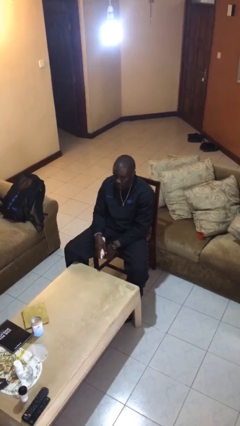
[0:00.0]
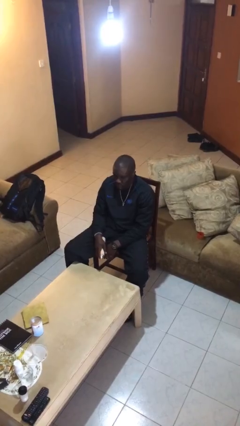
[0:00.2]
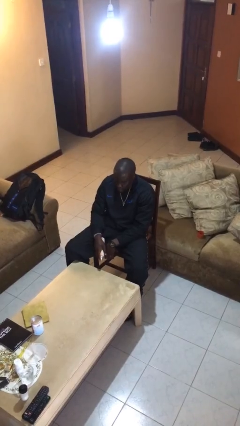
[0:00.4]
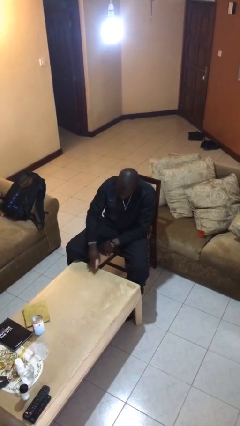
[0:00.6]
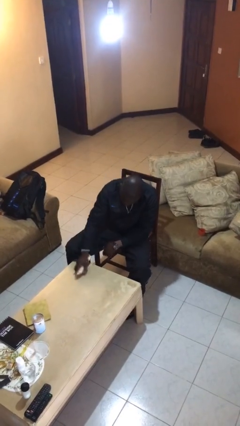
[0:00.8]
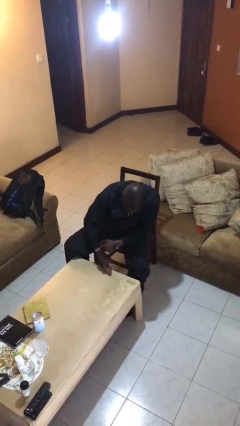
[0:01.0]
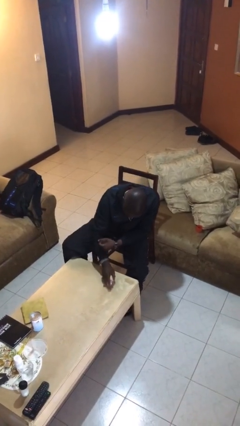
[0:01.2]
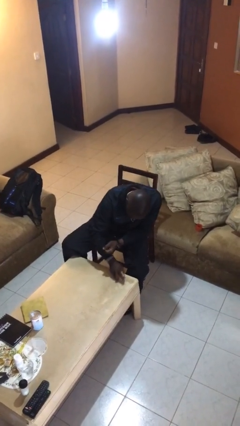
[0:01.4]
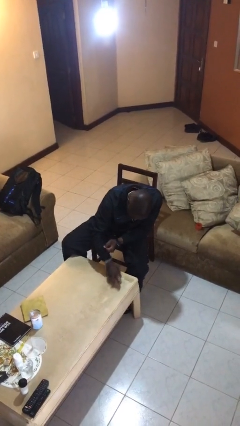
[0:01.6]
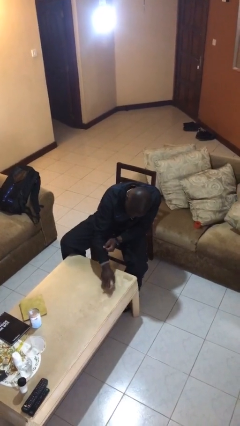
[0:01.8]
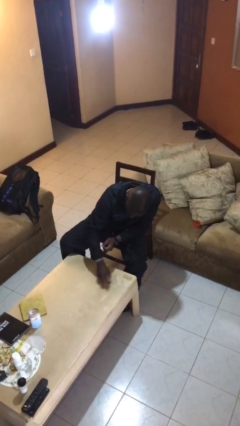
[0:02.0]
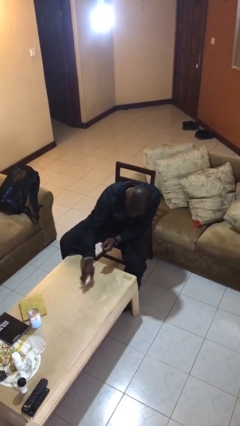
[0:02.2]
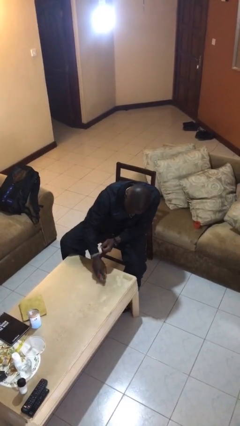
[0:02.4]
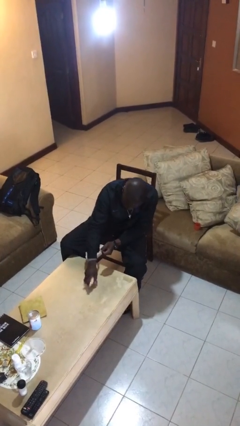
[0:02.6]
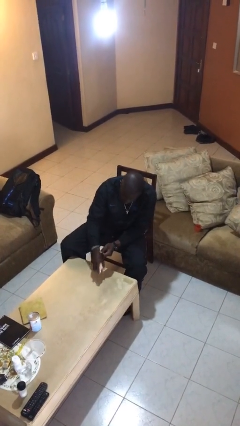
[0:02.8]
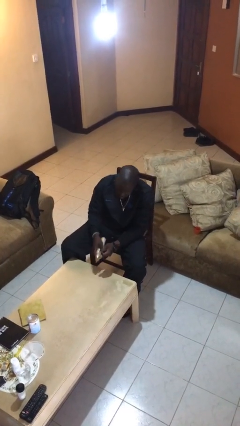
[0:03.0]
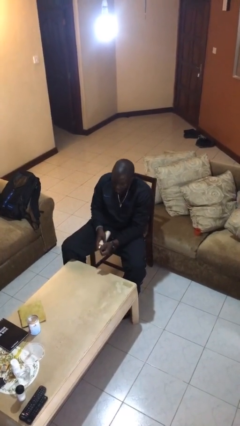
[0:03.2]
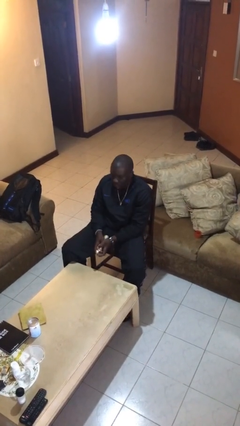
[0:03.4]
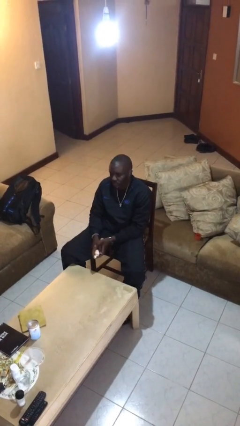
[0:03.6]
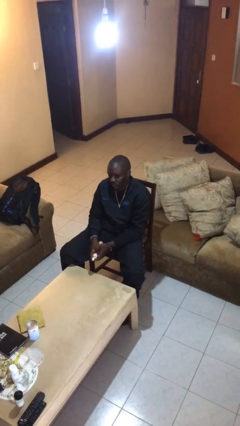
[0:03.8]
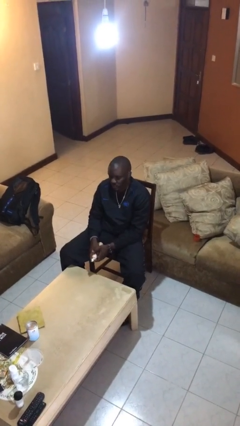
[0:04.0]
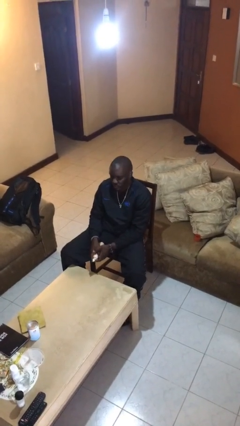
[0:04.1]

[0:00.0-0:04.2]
person sprays from bottle

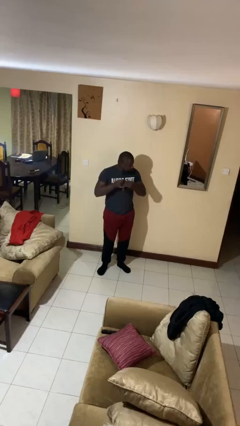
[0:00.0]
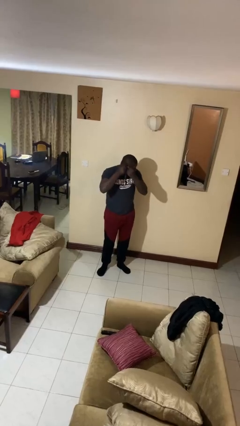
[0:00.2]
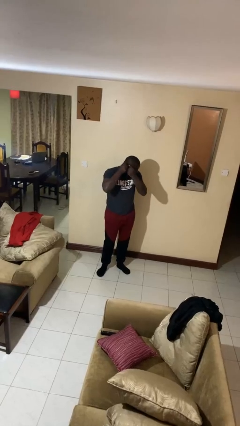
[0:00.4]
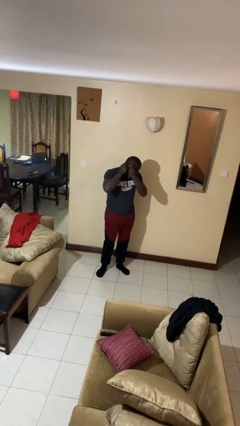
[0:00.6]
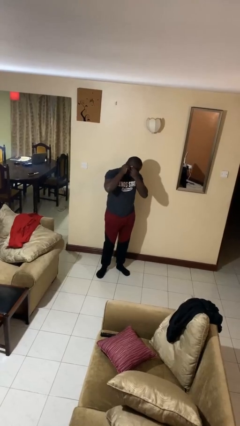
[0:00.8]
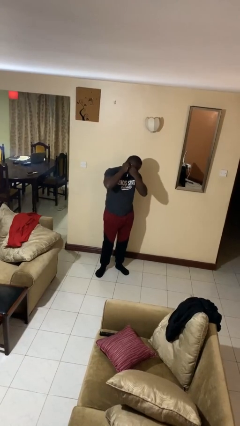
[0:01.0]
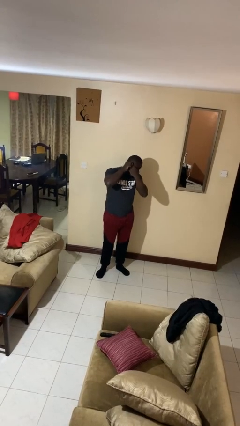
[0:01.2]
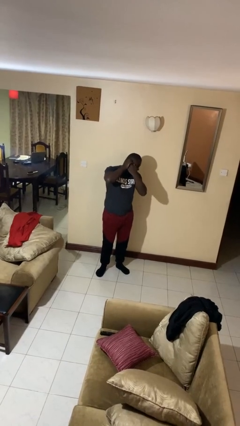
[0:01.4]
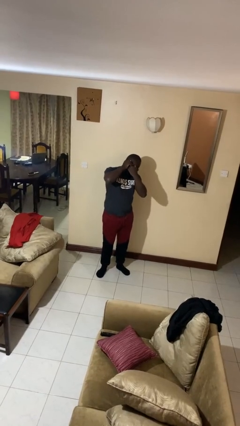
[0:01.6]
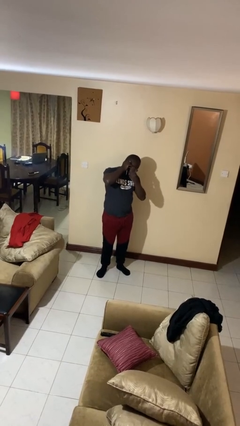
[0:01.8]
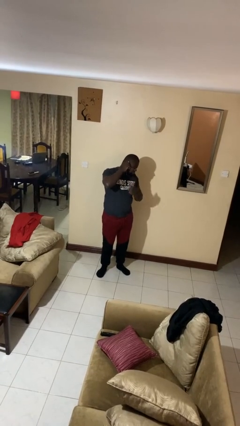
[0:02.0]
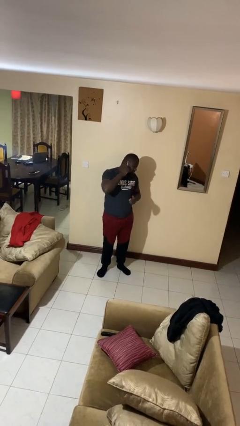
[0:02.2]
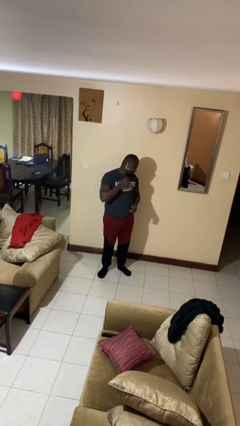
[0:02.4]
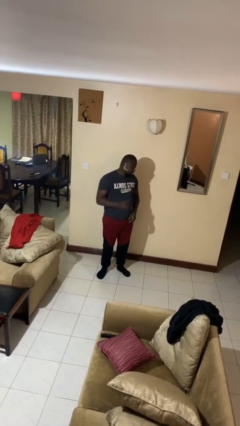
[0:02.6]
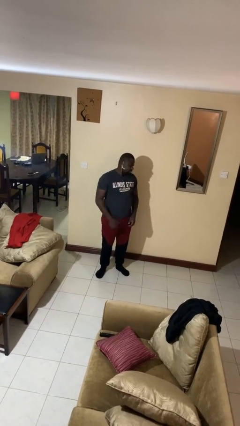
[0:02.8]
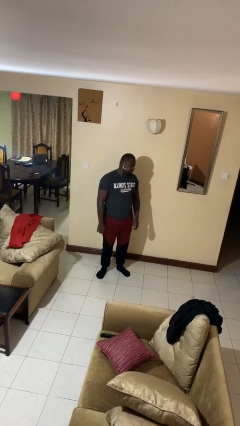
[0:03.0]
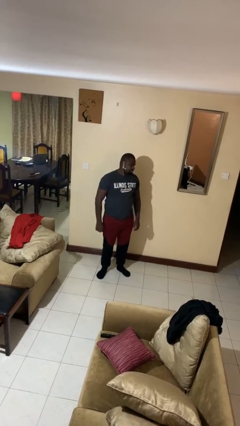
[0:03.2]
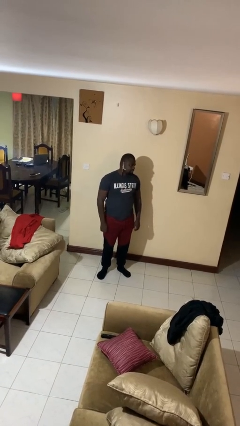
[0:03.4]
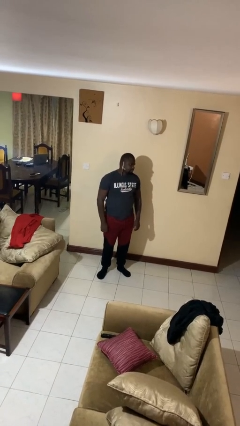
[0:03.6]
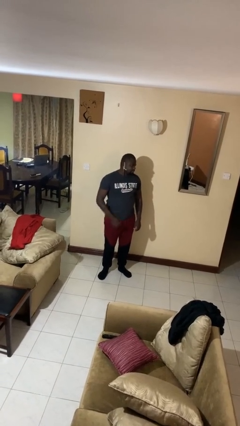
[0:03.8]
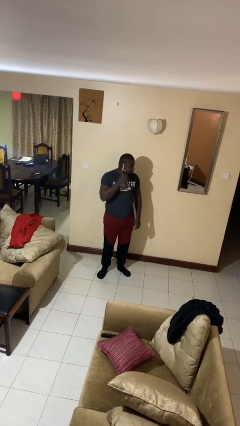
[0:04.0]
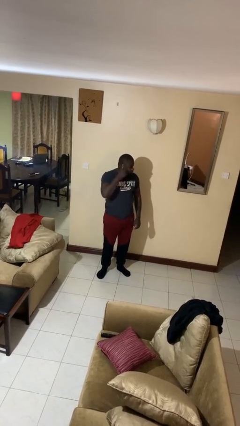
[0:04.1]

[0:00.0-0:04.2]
person puts on earrings

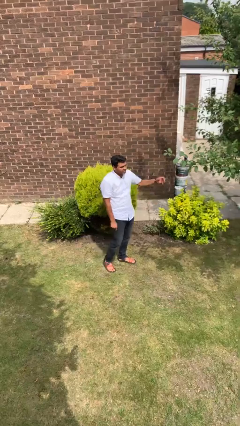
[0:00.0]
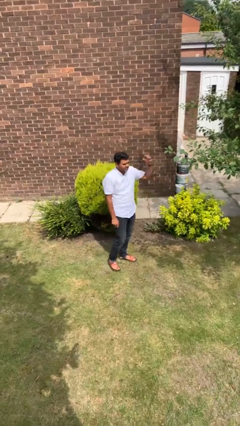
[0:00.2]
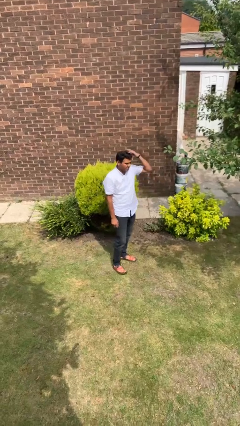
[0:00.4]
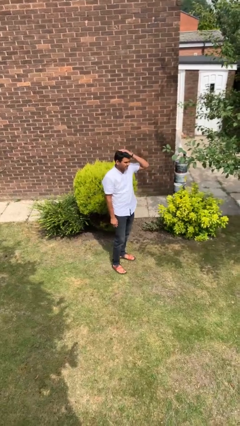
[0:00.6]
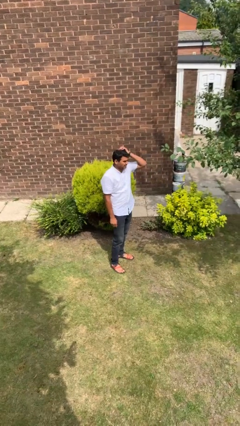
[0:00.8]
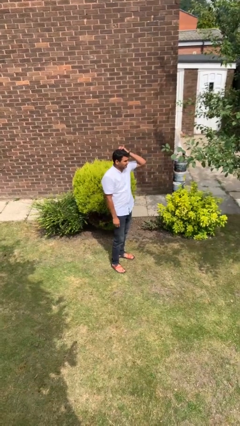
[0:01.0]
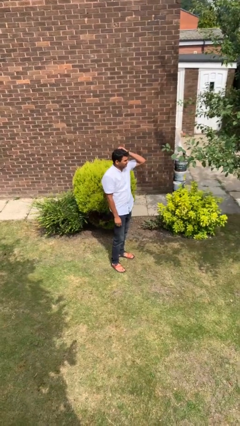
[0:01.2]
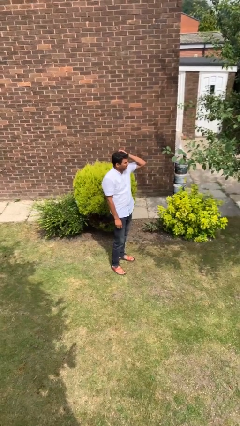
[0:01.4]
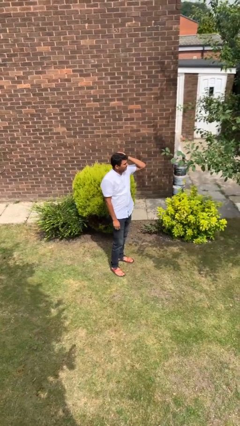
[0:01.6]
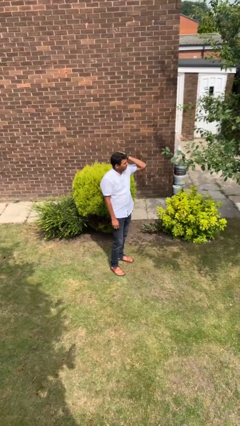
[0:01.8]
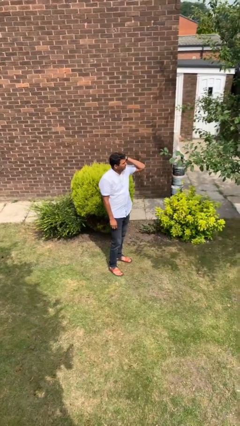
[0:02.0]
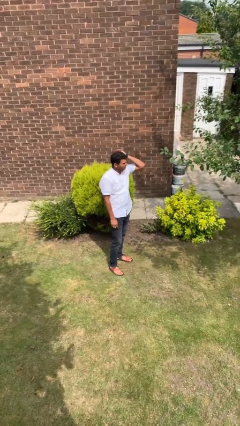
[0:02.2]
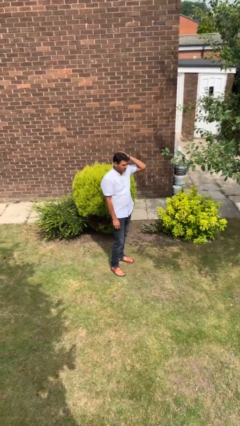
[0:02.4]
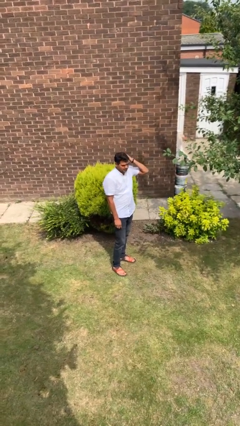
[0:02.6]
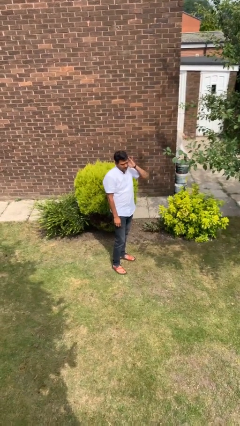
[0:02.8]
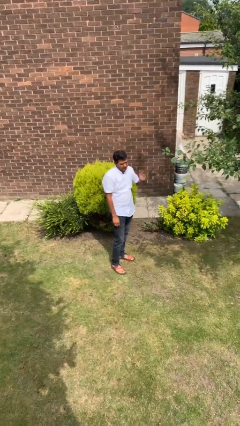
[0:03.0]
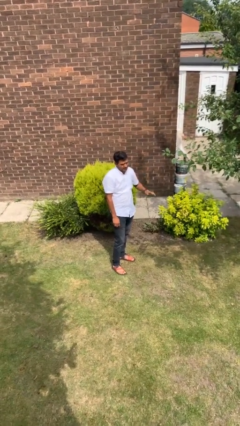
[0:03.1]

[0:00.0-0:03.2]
person scratches face

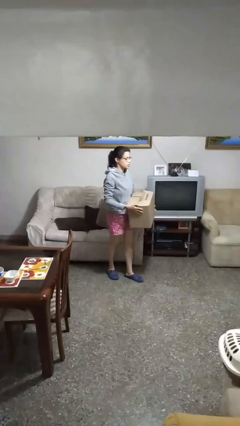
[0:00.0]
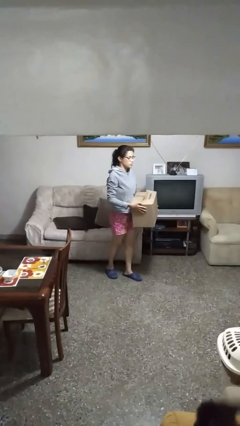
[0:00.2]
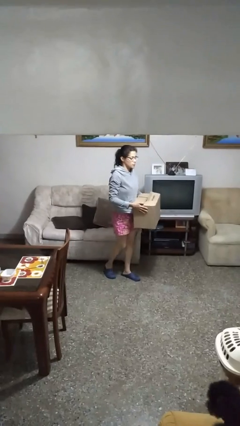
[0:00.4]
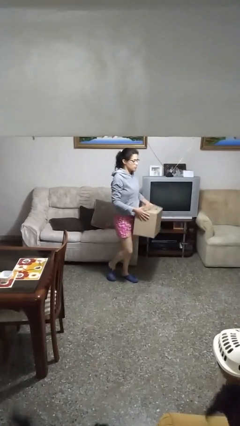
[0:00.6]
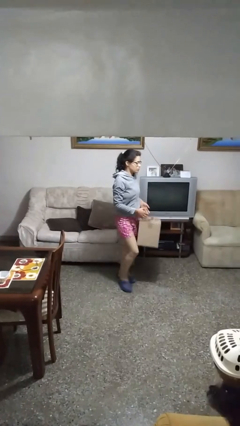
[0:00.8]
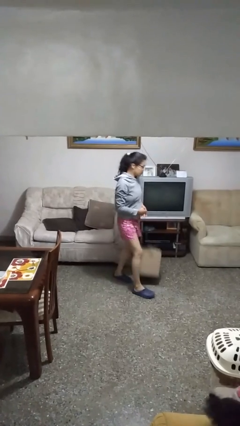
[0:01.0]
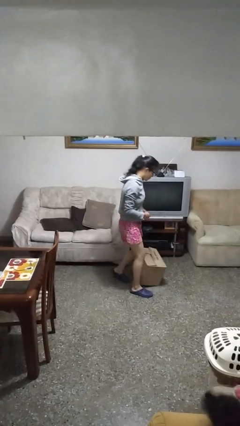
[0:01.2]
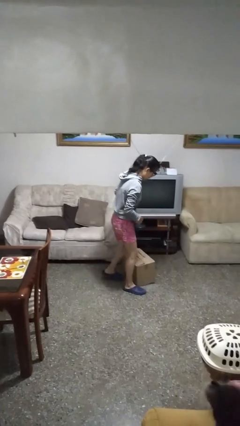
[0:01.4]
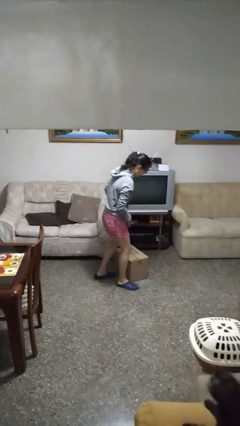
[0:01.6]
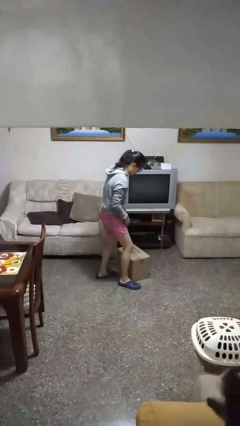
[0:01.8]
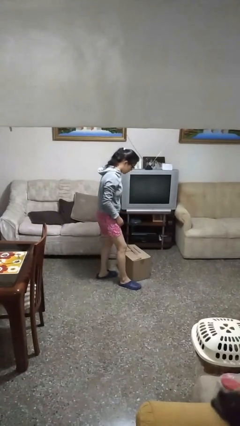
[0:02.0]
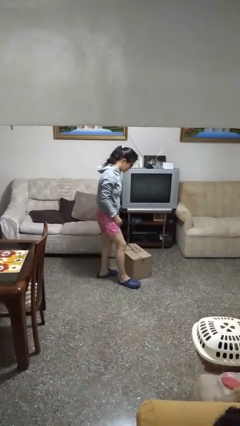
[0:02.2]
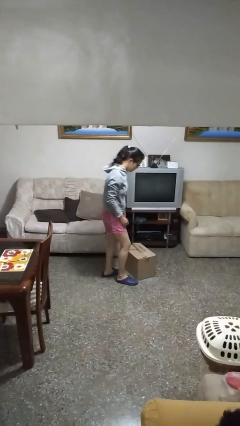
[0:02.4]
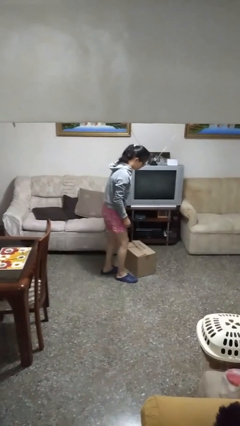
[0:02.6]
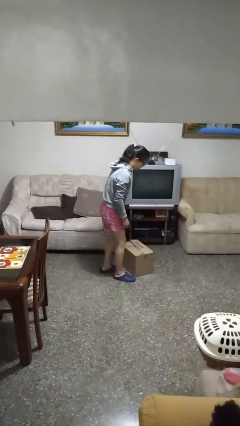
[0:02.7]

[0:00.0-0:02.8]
person drops object

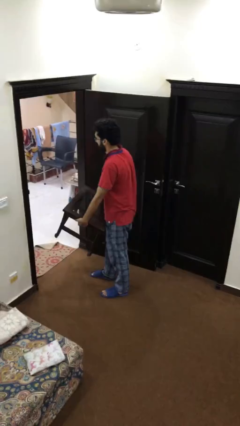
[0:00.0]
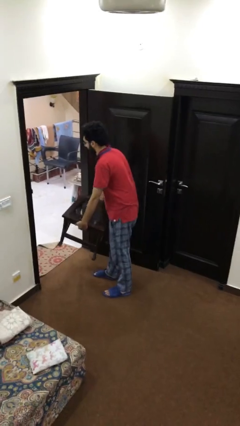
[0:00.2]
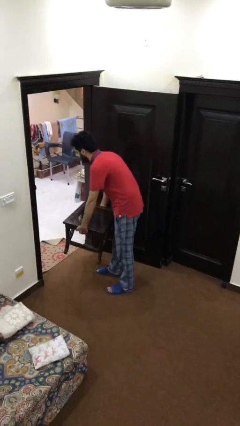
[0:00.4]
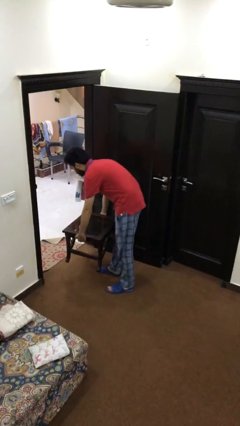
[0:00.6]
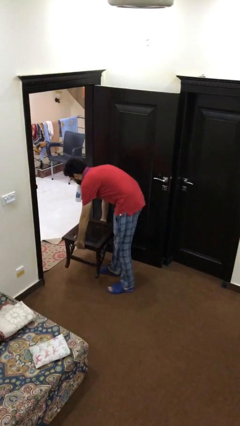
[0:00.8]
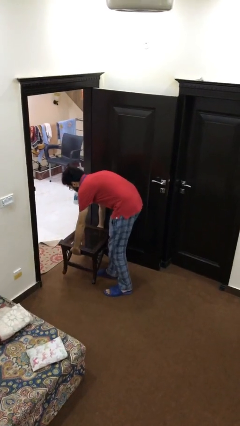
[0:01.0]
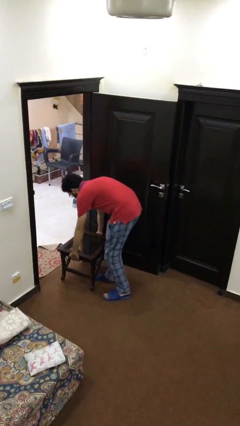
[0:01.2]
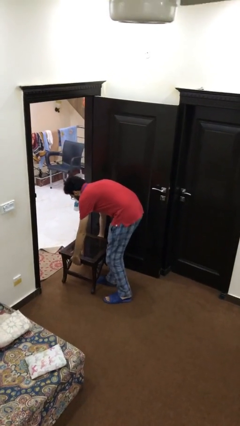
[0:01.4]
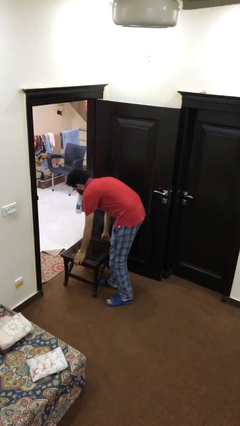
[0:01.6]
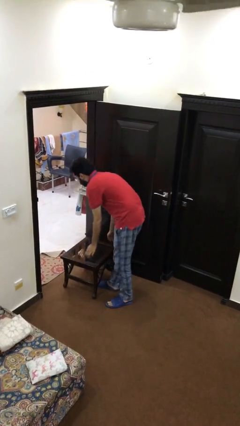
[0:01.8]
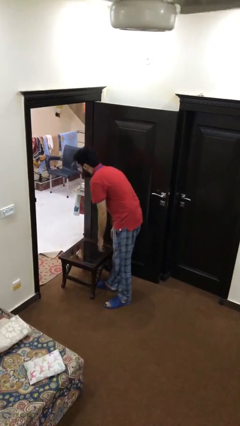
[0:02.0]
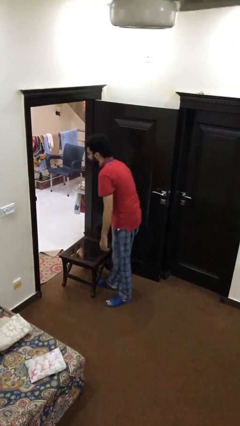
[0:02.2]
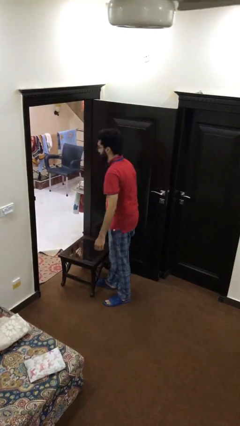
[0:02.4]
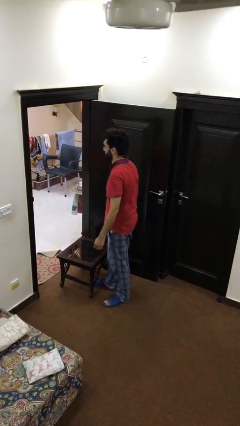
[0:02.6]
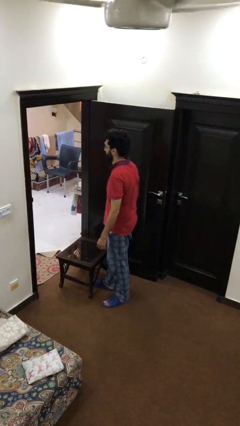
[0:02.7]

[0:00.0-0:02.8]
person puts down object on floor

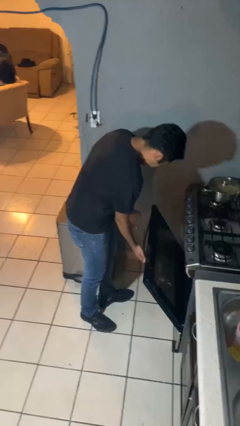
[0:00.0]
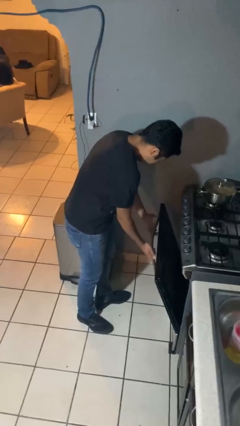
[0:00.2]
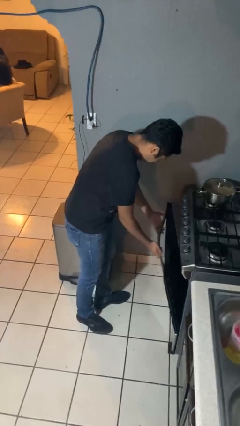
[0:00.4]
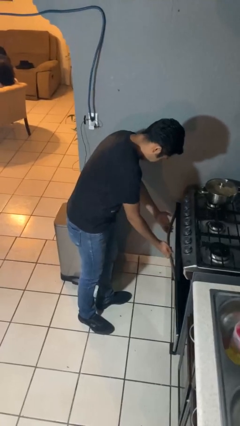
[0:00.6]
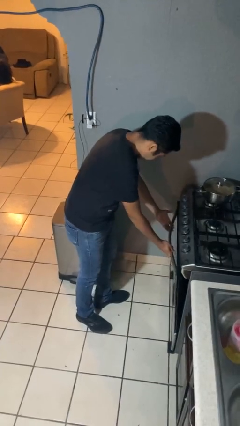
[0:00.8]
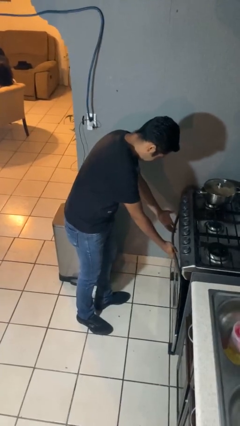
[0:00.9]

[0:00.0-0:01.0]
person closes oven door
